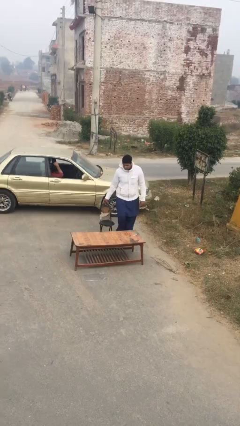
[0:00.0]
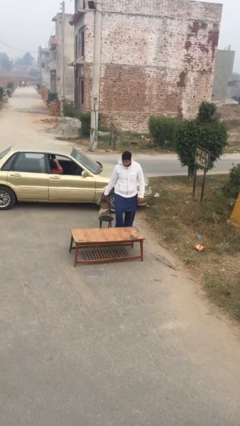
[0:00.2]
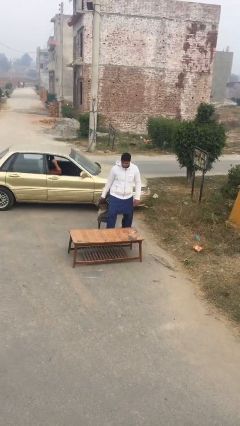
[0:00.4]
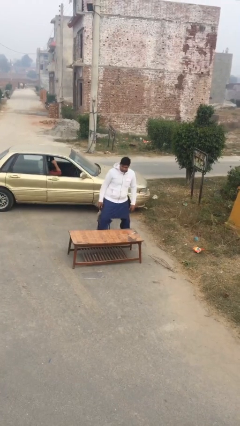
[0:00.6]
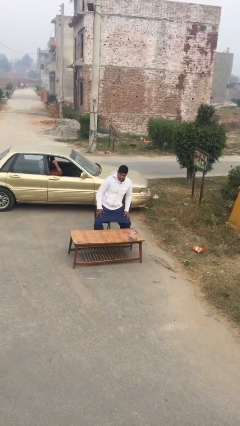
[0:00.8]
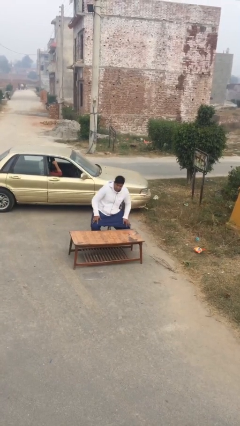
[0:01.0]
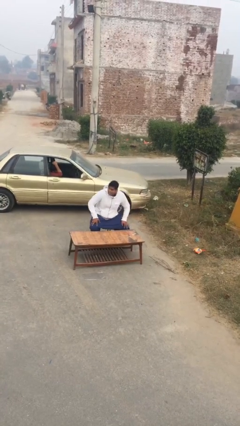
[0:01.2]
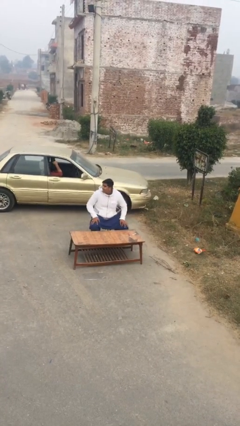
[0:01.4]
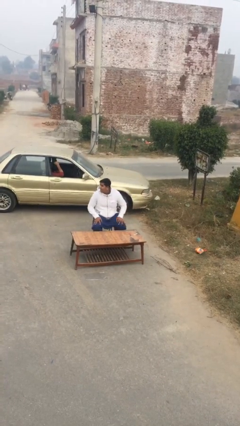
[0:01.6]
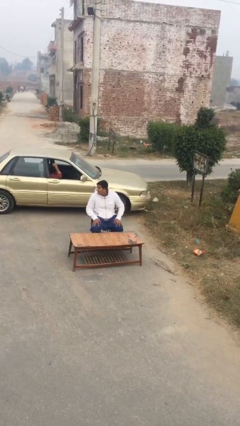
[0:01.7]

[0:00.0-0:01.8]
person sits down

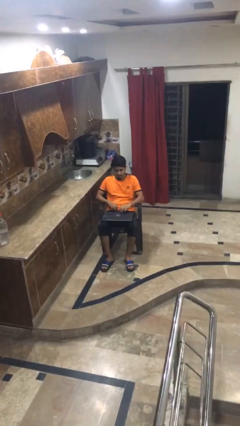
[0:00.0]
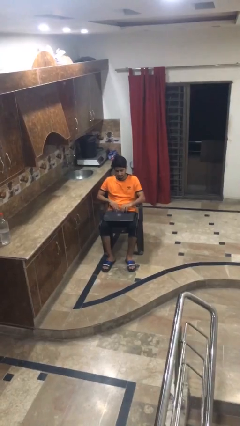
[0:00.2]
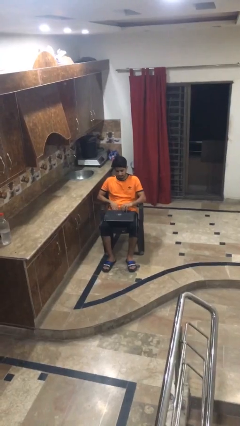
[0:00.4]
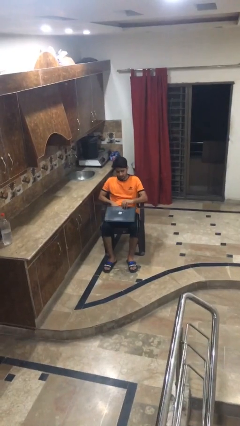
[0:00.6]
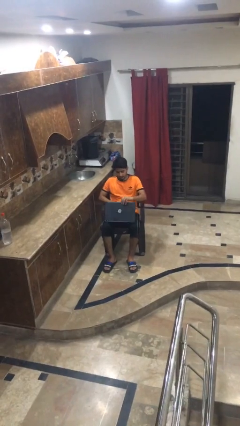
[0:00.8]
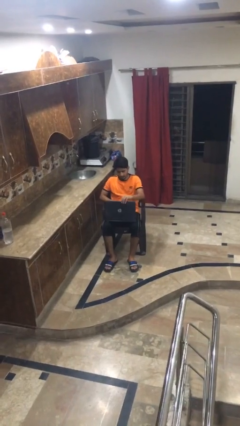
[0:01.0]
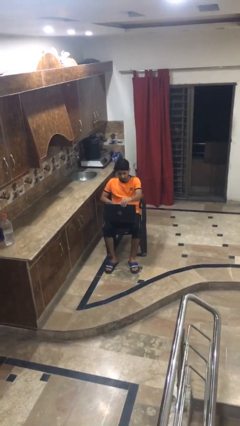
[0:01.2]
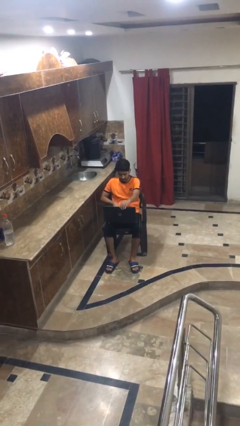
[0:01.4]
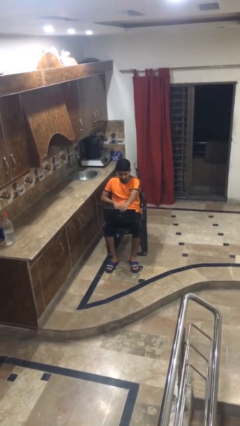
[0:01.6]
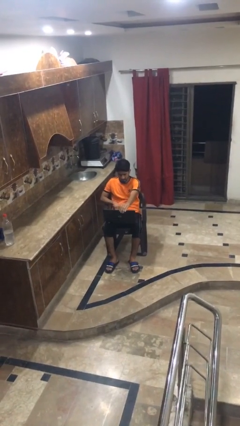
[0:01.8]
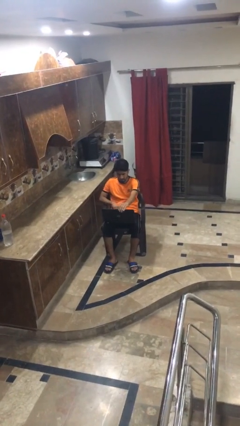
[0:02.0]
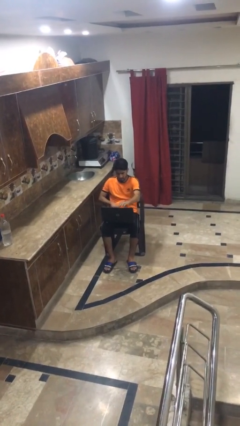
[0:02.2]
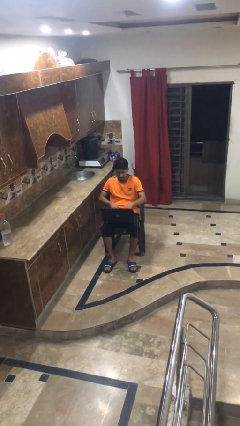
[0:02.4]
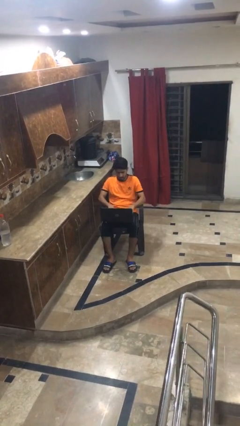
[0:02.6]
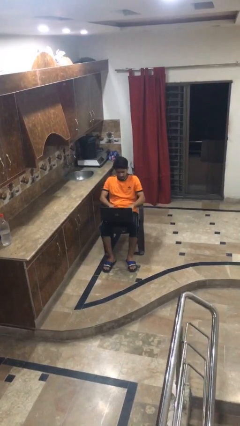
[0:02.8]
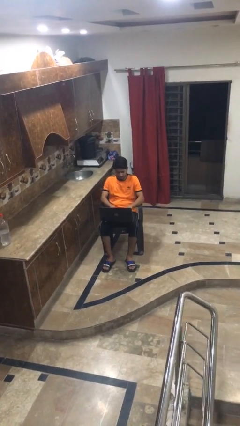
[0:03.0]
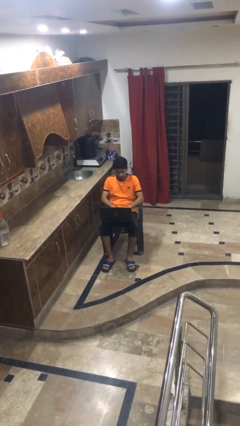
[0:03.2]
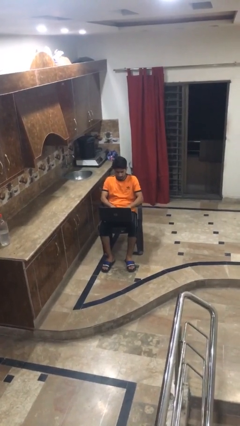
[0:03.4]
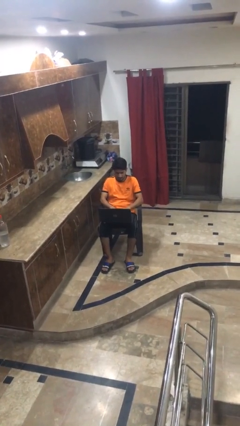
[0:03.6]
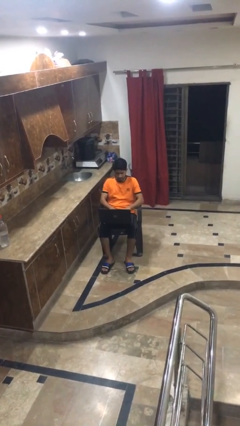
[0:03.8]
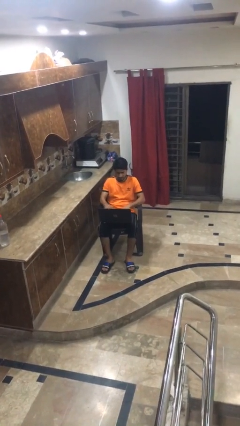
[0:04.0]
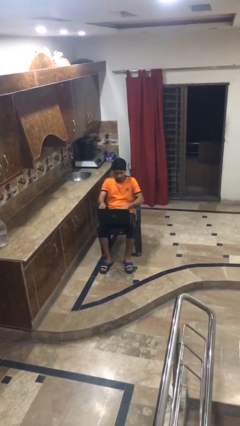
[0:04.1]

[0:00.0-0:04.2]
person opens laptop

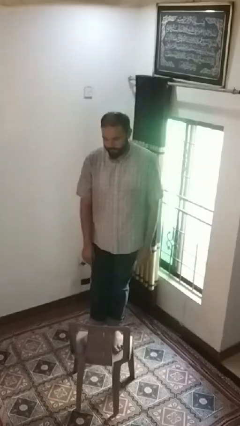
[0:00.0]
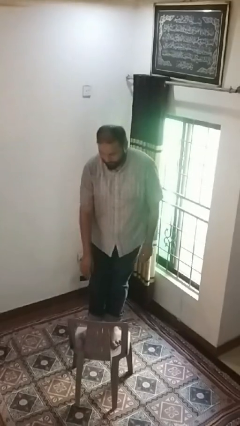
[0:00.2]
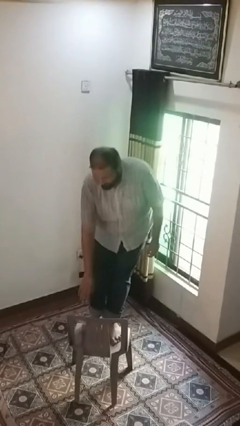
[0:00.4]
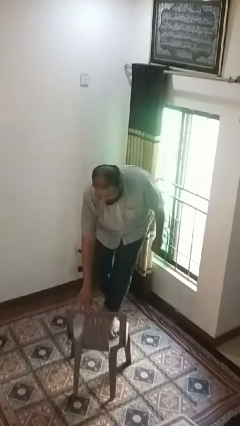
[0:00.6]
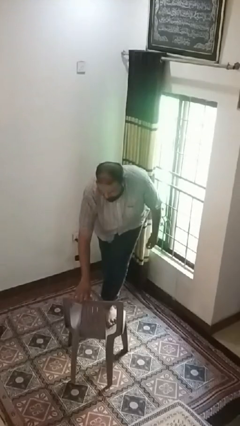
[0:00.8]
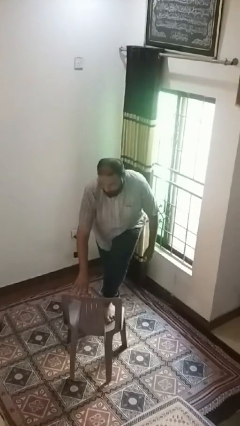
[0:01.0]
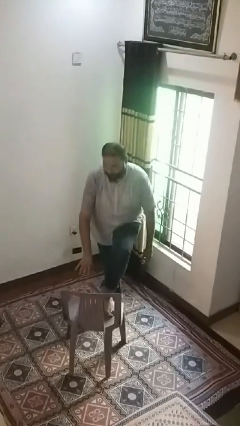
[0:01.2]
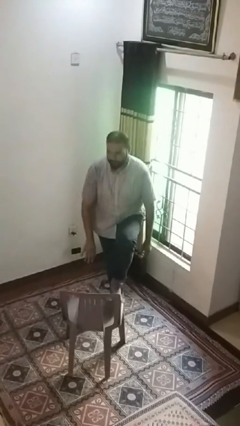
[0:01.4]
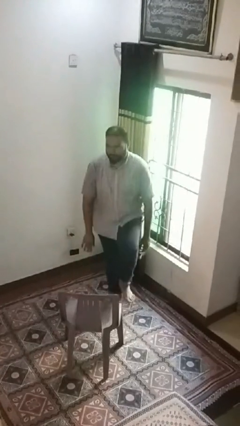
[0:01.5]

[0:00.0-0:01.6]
person climbs off chair

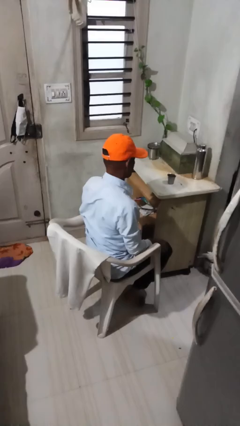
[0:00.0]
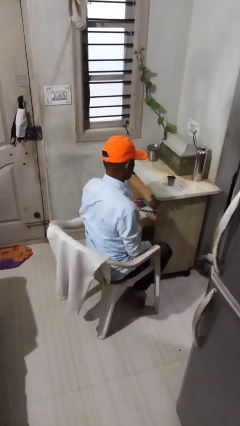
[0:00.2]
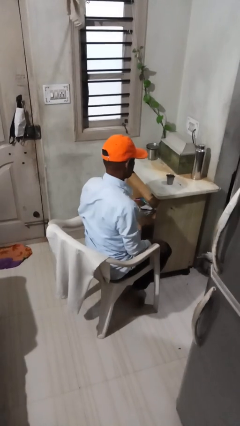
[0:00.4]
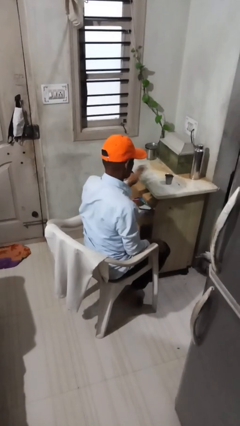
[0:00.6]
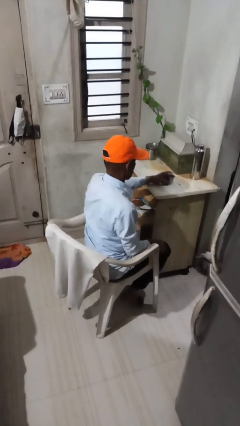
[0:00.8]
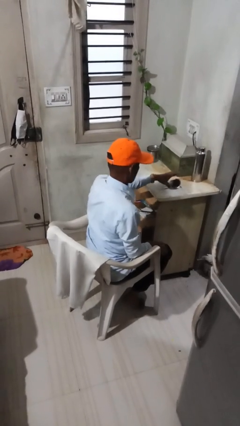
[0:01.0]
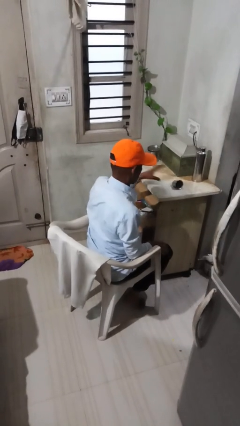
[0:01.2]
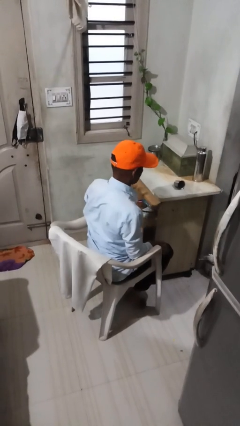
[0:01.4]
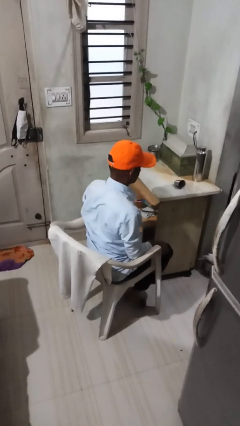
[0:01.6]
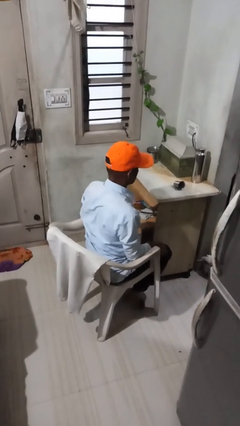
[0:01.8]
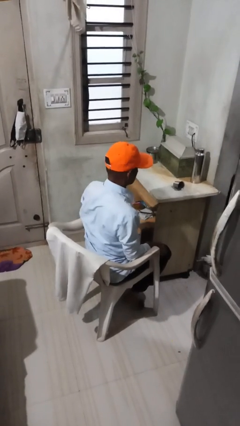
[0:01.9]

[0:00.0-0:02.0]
person knocks over glass

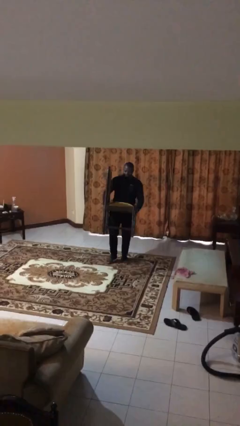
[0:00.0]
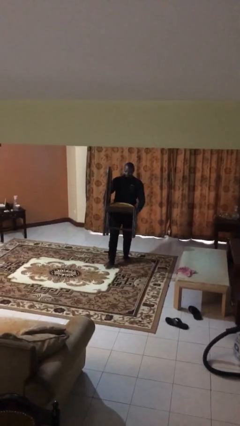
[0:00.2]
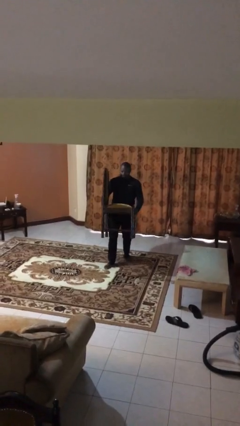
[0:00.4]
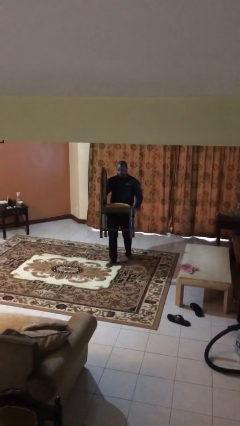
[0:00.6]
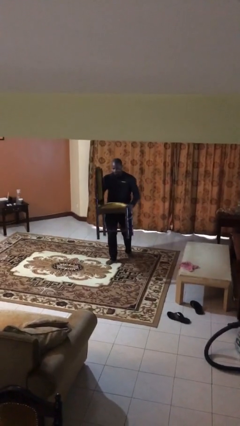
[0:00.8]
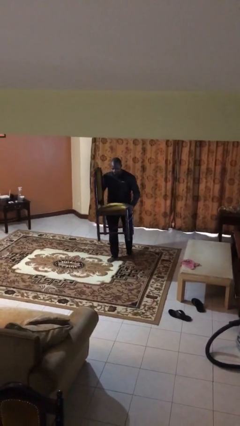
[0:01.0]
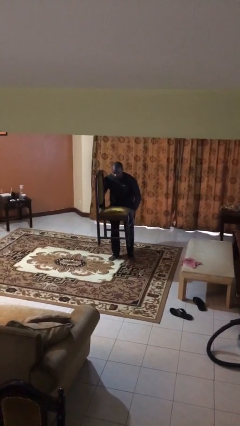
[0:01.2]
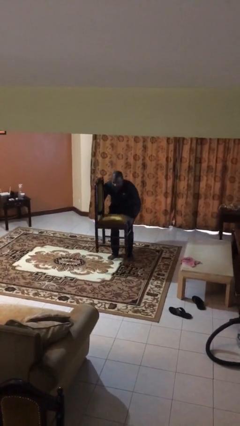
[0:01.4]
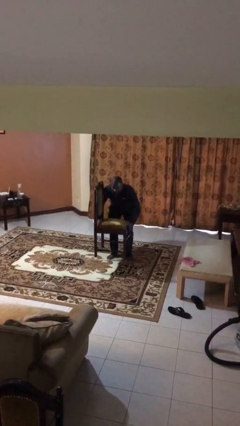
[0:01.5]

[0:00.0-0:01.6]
person puts down object on floor

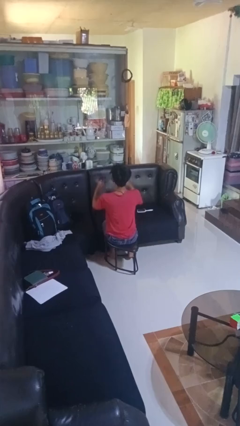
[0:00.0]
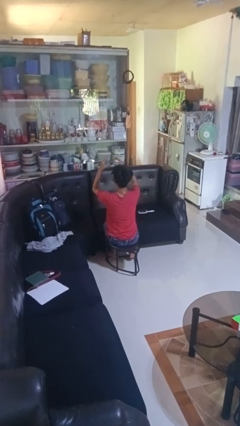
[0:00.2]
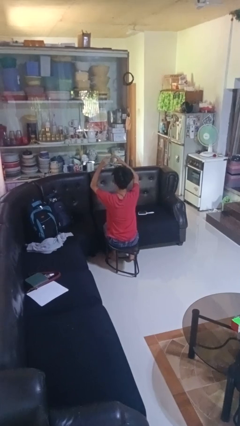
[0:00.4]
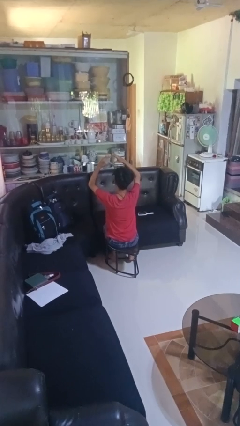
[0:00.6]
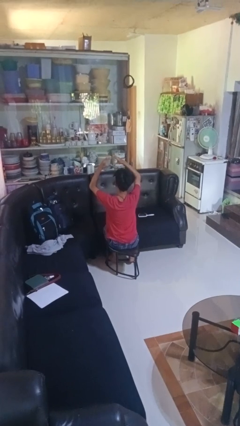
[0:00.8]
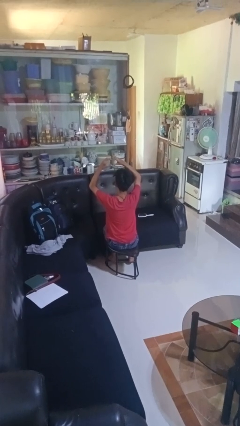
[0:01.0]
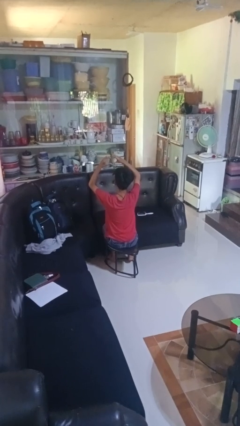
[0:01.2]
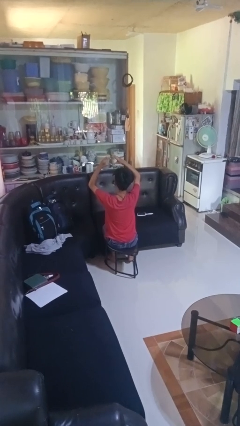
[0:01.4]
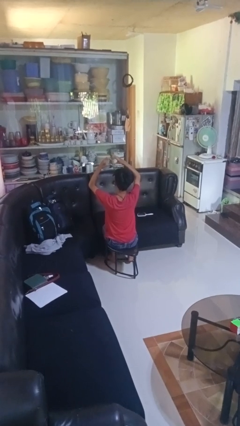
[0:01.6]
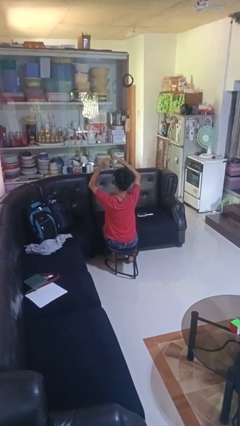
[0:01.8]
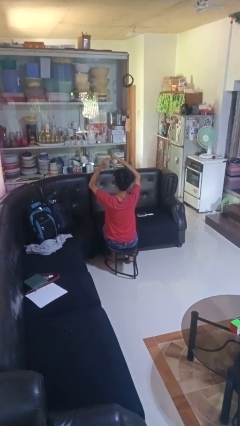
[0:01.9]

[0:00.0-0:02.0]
person gestures heart

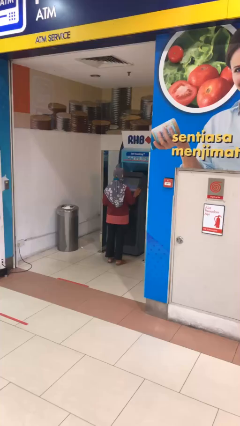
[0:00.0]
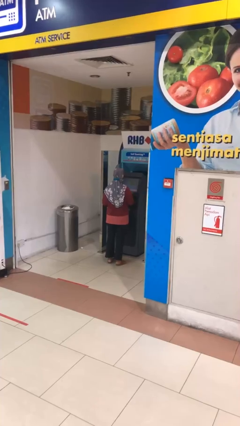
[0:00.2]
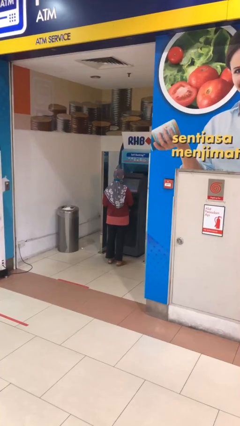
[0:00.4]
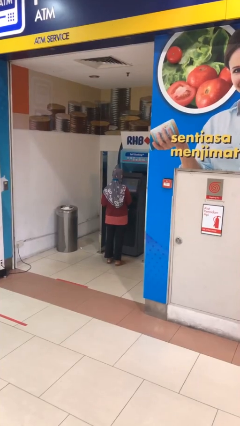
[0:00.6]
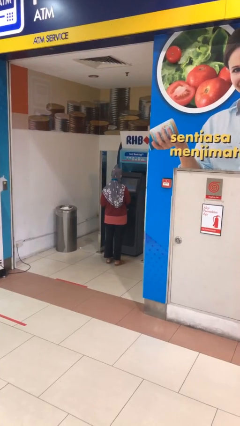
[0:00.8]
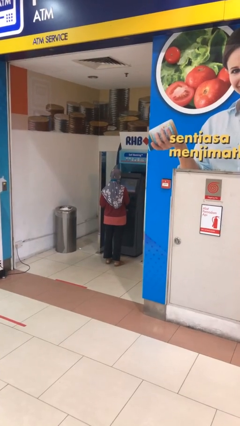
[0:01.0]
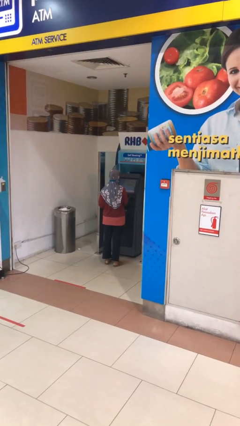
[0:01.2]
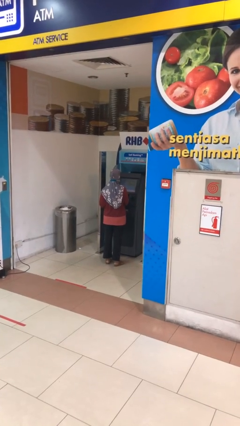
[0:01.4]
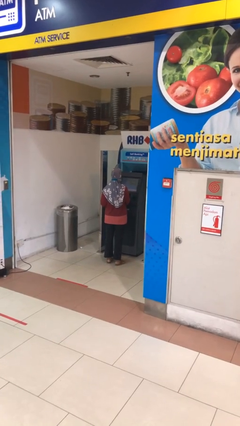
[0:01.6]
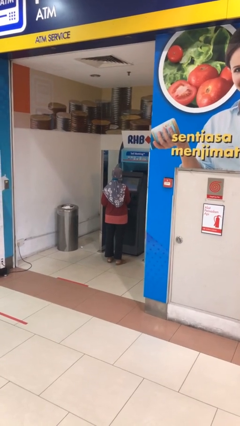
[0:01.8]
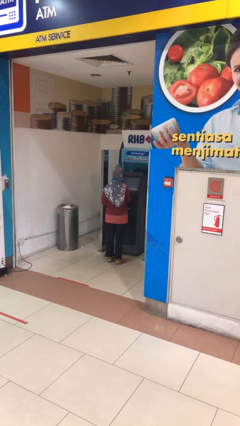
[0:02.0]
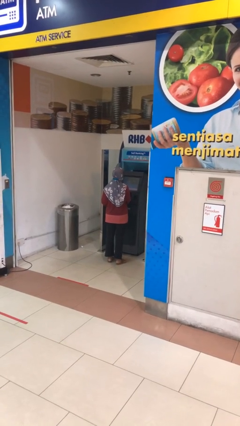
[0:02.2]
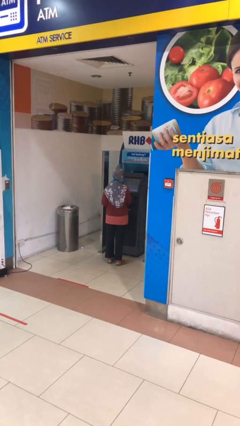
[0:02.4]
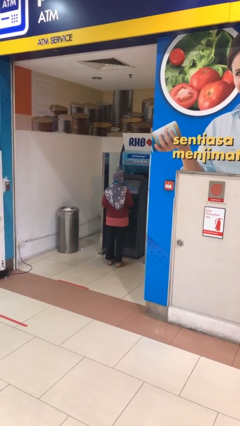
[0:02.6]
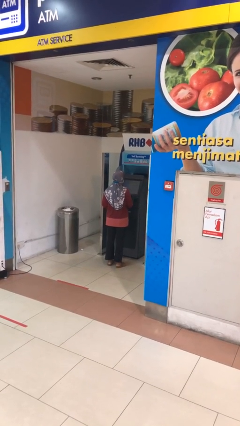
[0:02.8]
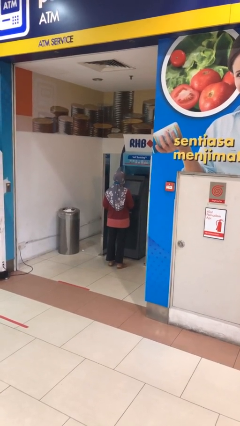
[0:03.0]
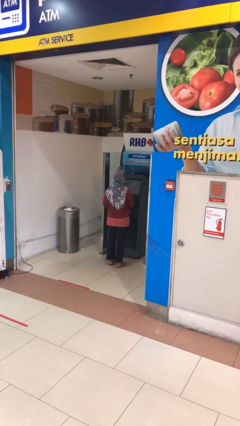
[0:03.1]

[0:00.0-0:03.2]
person purchases from machine

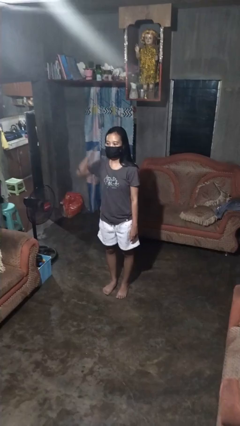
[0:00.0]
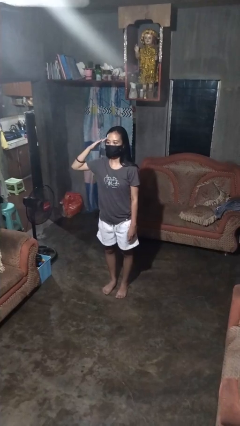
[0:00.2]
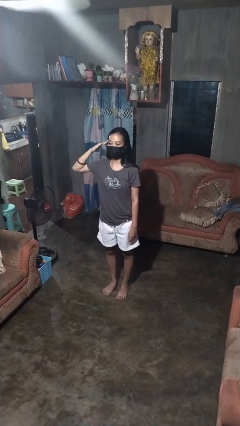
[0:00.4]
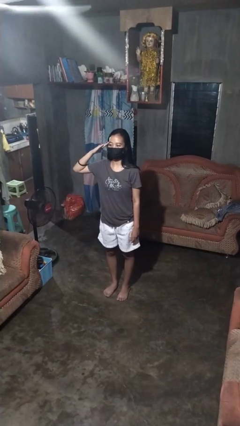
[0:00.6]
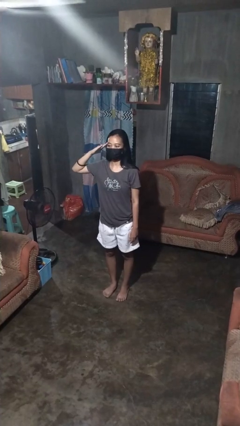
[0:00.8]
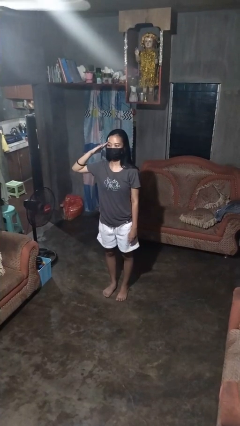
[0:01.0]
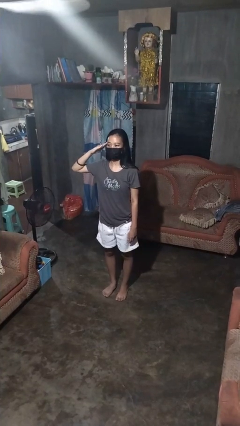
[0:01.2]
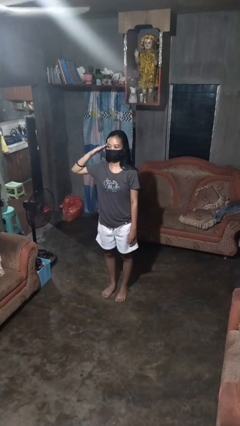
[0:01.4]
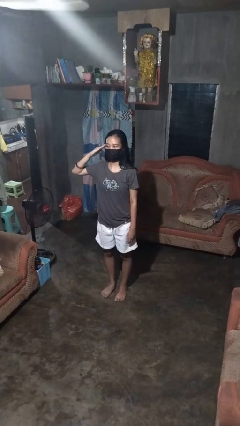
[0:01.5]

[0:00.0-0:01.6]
person salutes